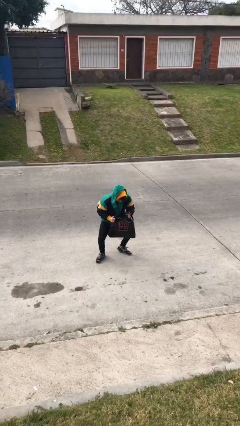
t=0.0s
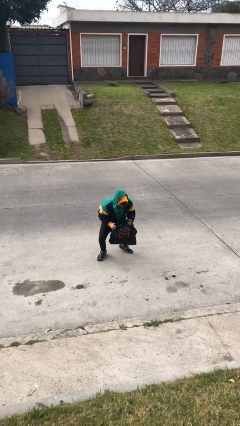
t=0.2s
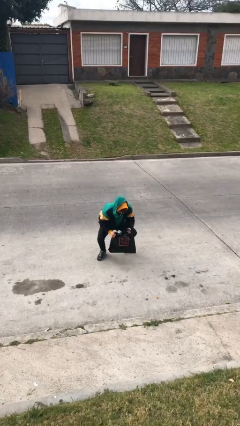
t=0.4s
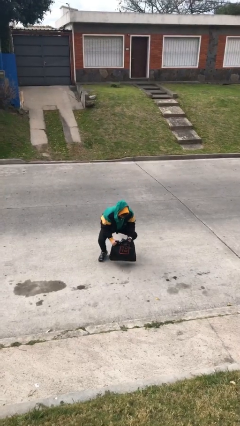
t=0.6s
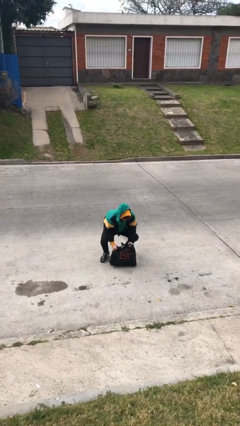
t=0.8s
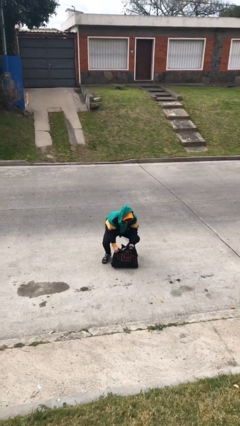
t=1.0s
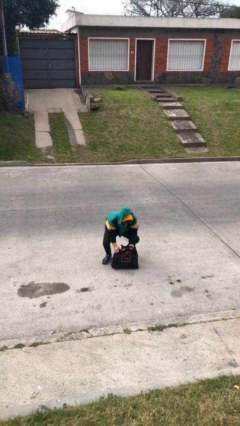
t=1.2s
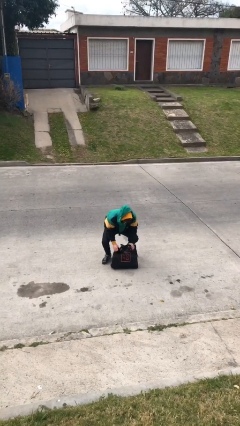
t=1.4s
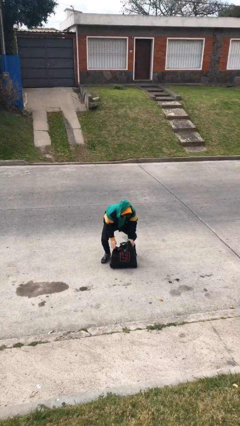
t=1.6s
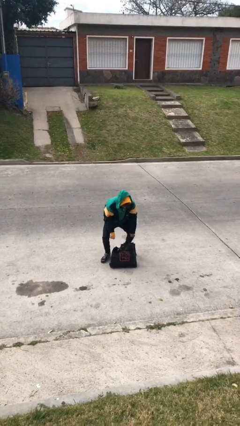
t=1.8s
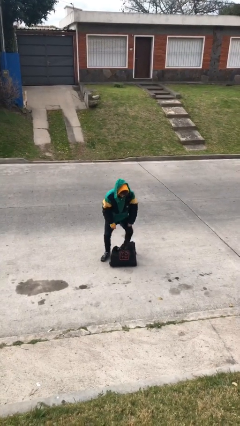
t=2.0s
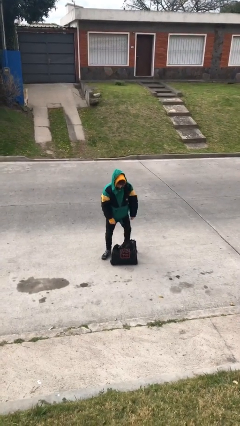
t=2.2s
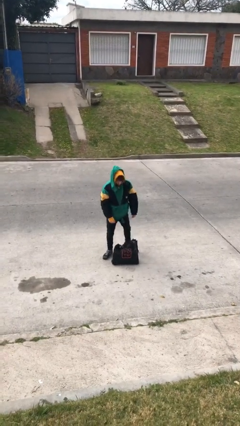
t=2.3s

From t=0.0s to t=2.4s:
person puts down object on floor

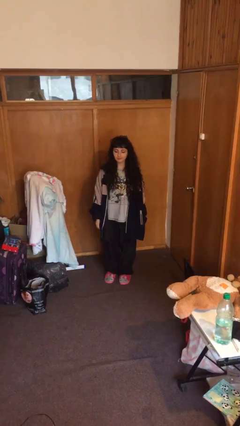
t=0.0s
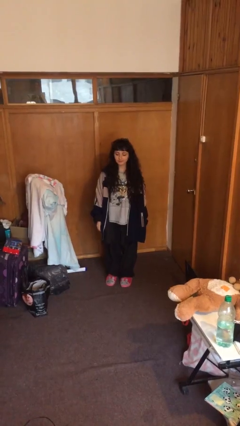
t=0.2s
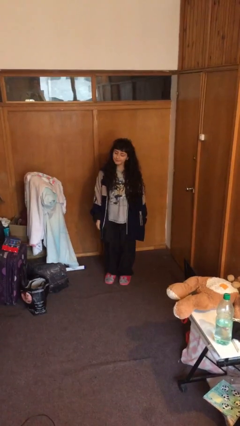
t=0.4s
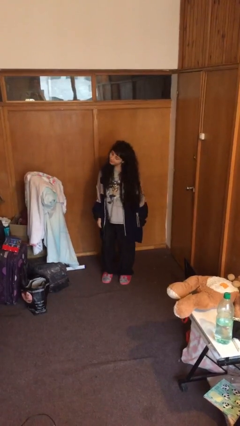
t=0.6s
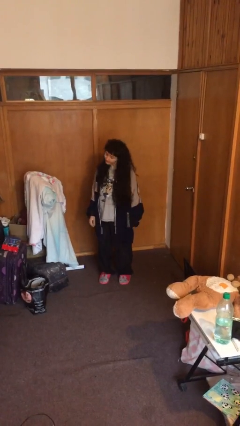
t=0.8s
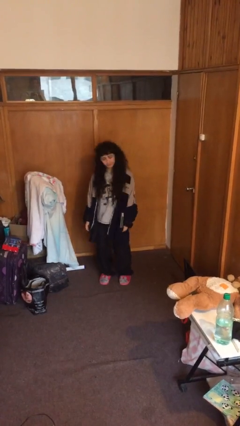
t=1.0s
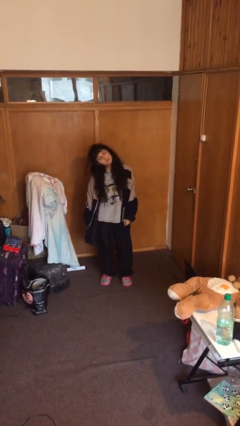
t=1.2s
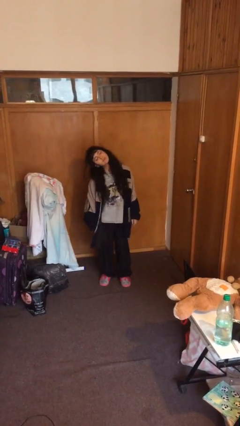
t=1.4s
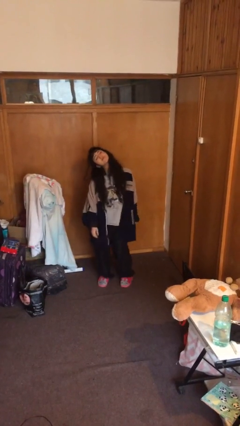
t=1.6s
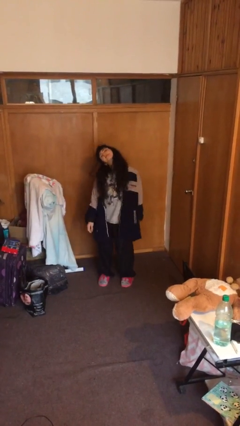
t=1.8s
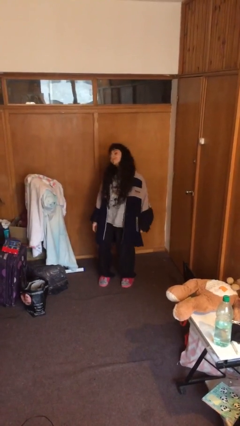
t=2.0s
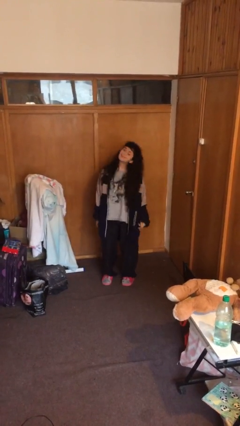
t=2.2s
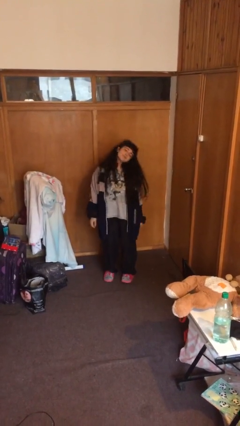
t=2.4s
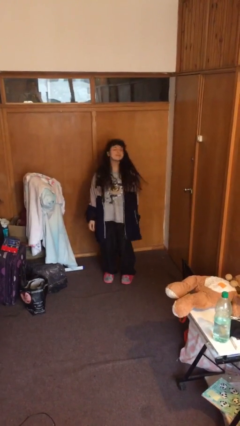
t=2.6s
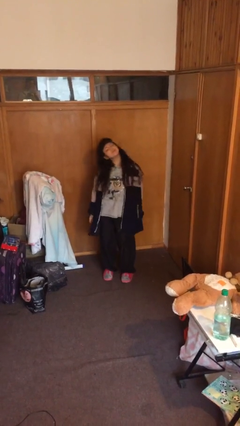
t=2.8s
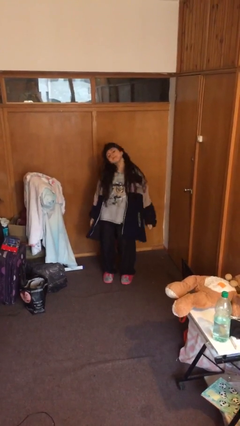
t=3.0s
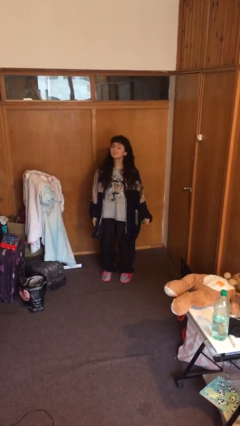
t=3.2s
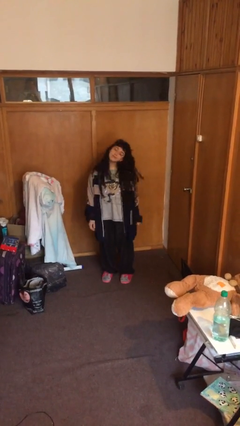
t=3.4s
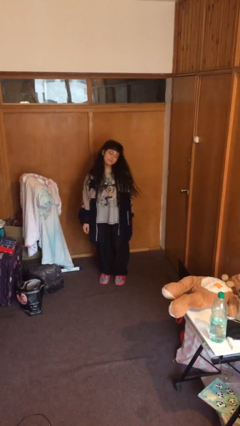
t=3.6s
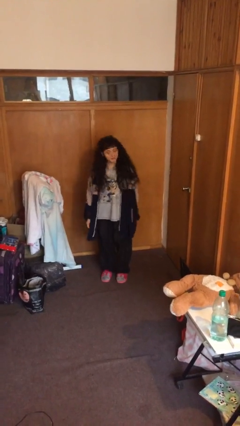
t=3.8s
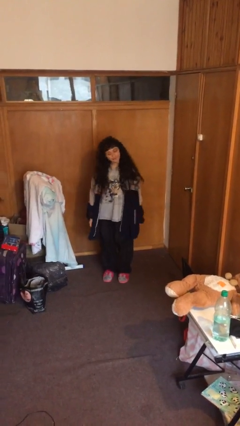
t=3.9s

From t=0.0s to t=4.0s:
person dances in place

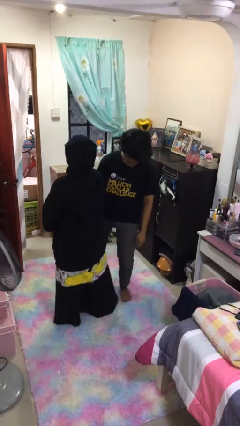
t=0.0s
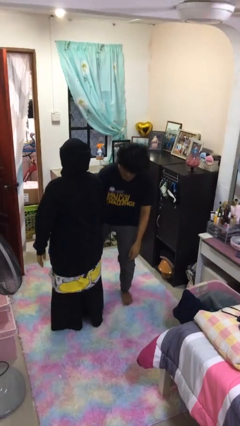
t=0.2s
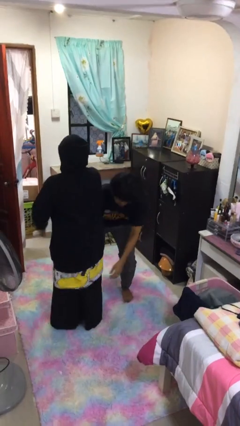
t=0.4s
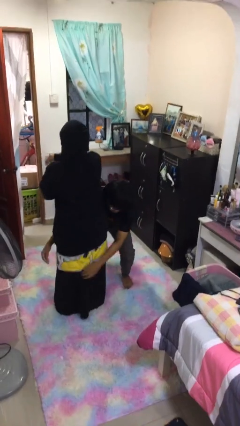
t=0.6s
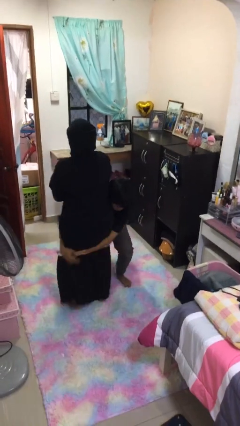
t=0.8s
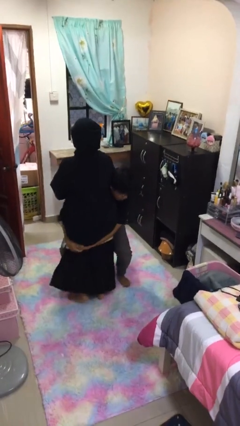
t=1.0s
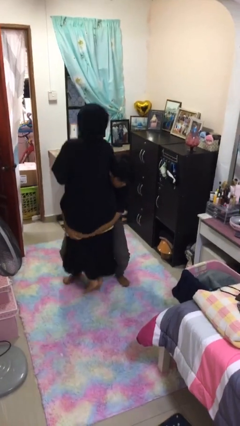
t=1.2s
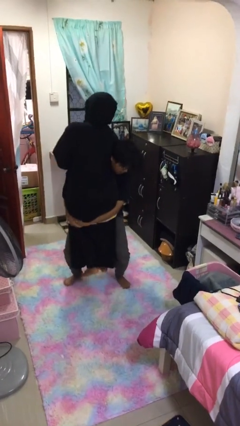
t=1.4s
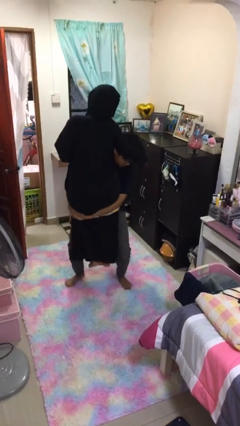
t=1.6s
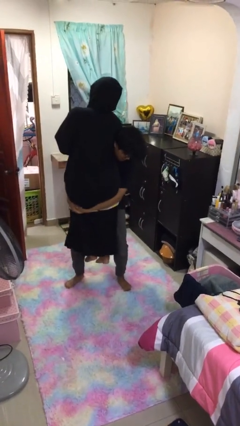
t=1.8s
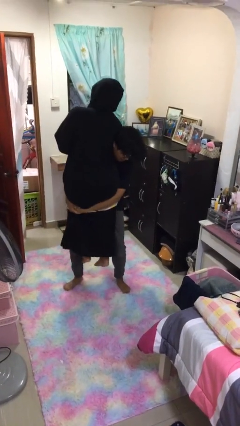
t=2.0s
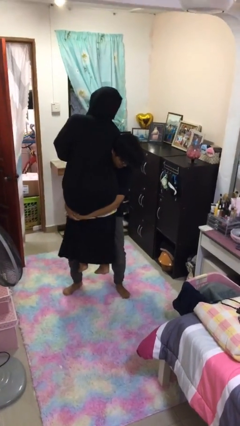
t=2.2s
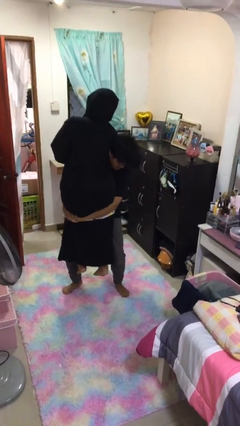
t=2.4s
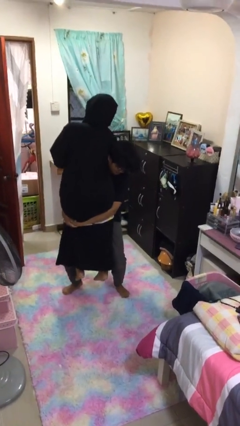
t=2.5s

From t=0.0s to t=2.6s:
person picks up person

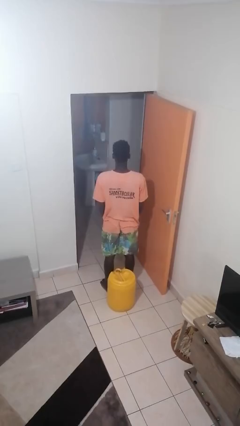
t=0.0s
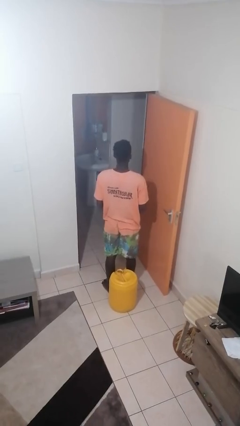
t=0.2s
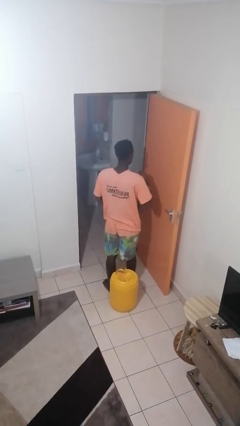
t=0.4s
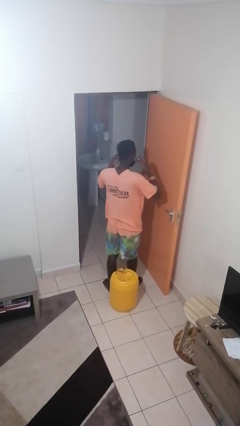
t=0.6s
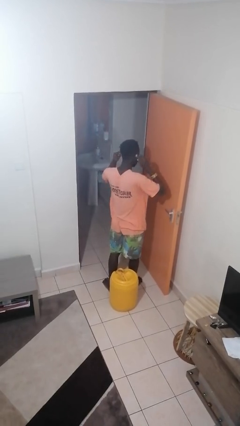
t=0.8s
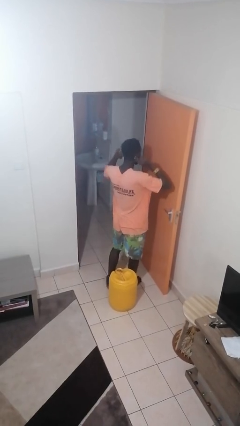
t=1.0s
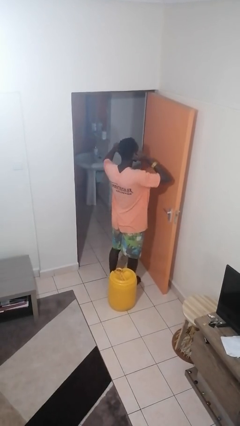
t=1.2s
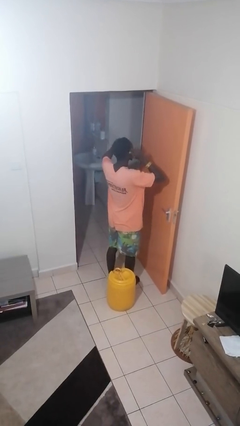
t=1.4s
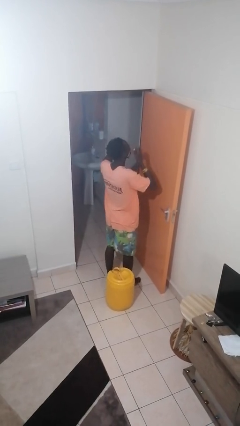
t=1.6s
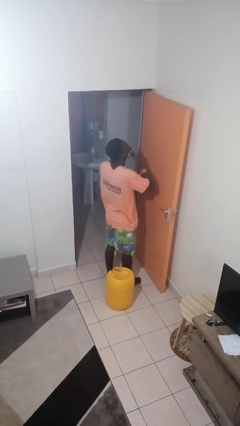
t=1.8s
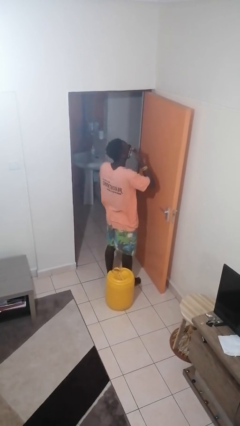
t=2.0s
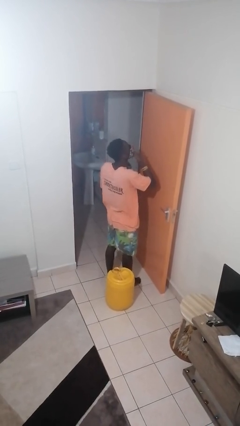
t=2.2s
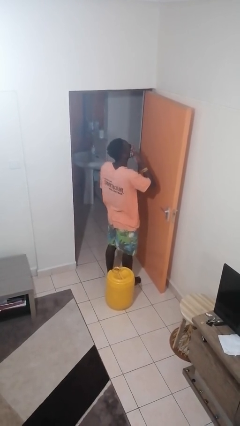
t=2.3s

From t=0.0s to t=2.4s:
person puts on facemask

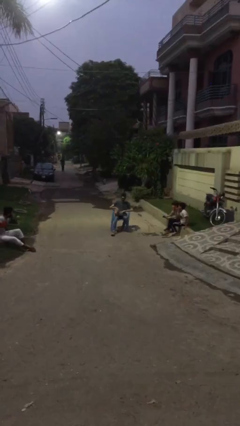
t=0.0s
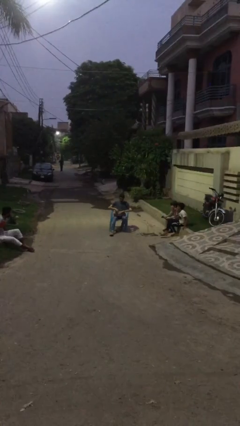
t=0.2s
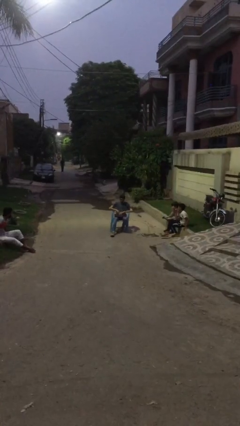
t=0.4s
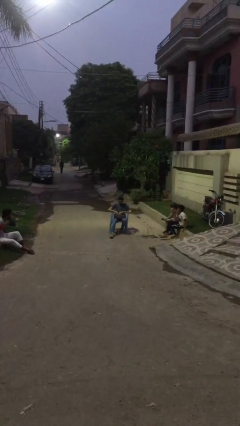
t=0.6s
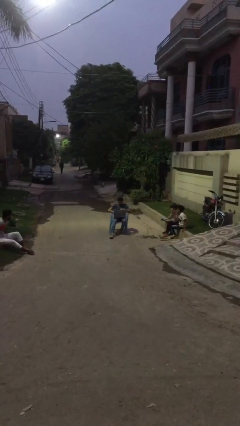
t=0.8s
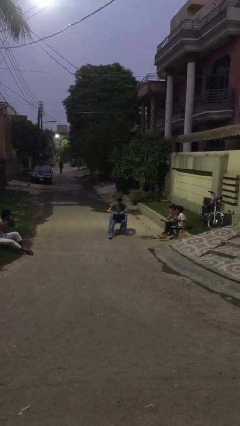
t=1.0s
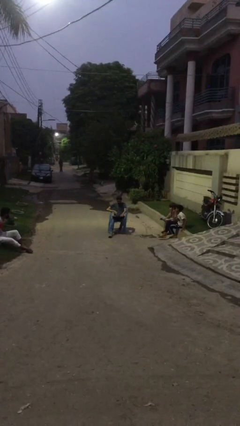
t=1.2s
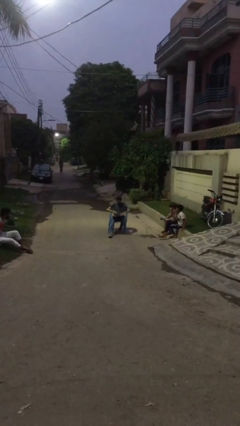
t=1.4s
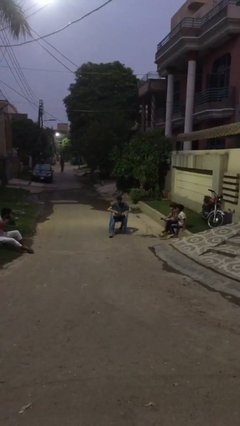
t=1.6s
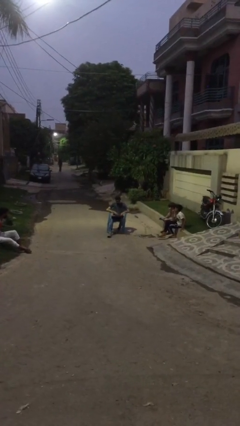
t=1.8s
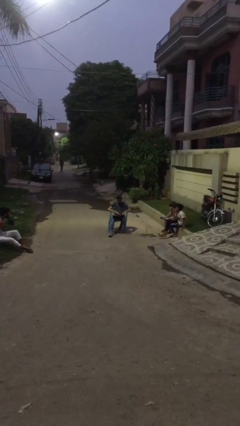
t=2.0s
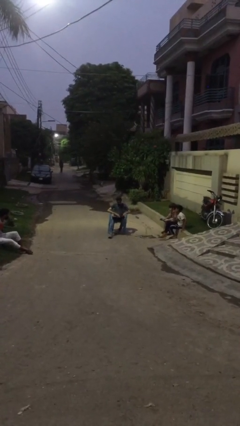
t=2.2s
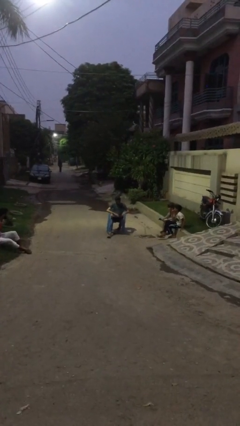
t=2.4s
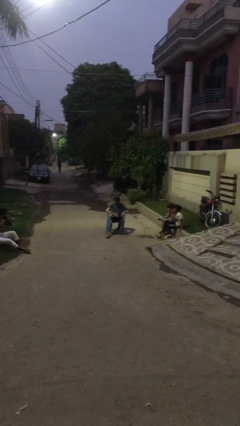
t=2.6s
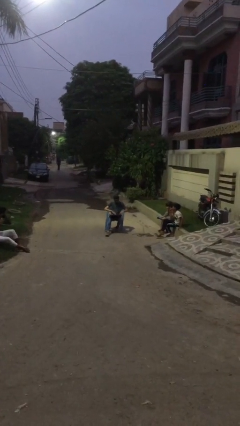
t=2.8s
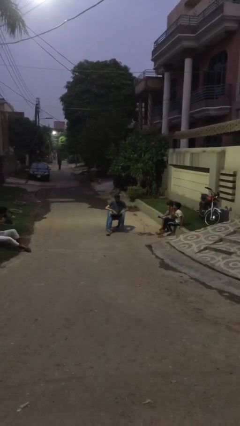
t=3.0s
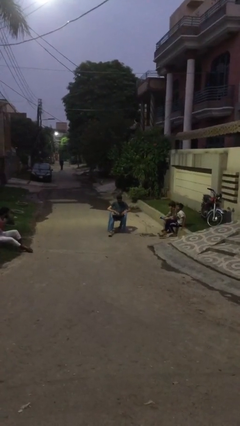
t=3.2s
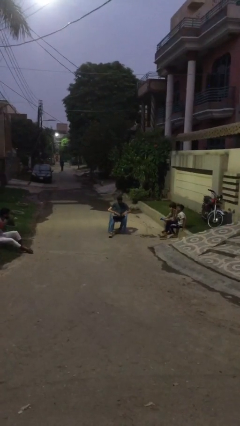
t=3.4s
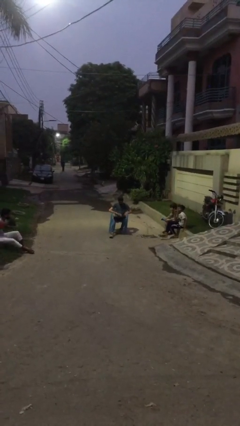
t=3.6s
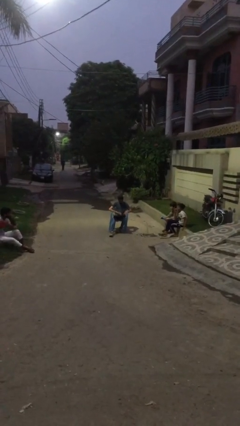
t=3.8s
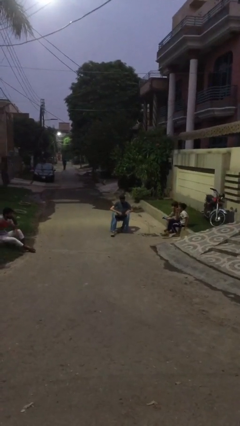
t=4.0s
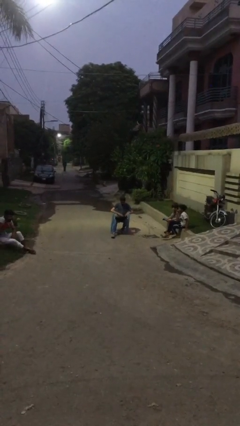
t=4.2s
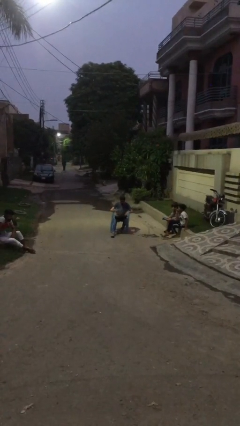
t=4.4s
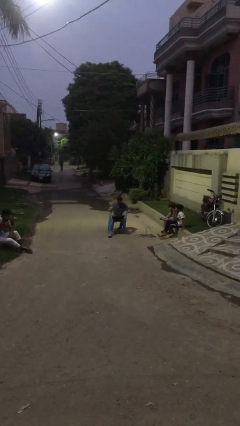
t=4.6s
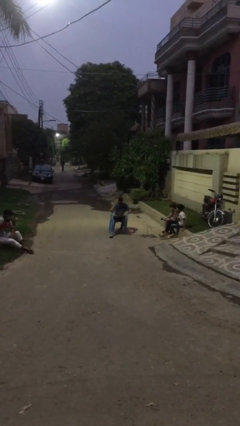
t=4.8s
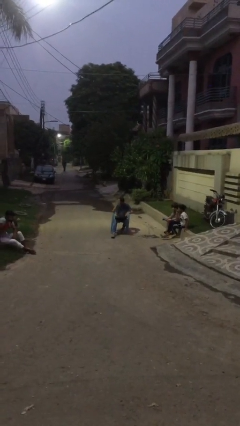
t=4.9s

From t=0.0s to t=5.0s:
person interacts with laptop

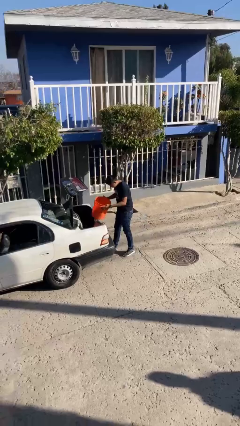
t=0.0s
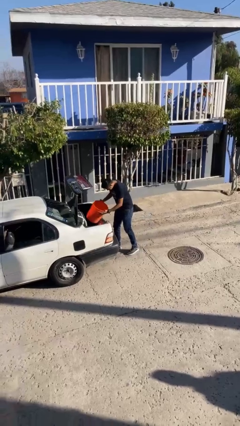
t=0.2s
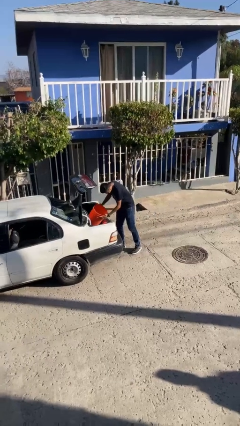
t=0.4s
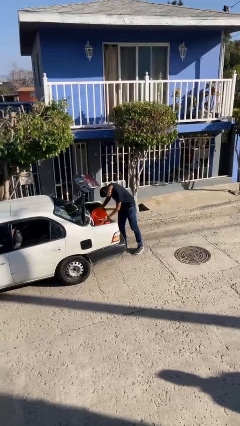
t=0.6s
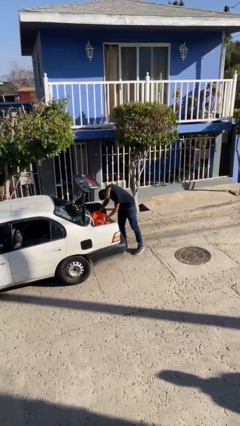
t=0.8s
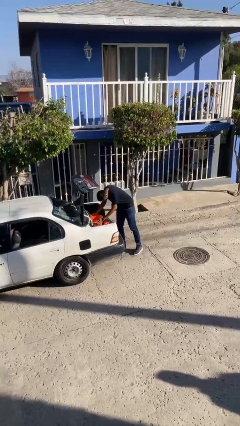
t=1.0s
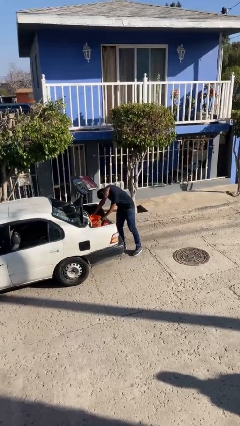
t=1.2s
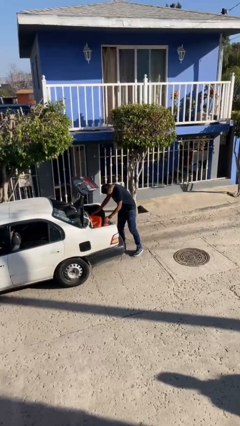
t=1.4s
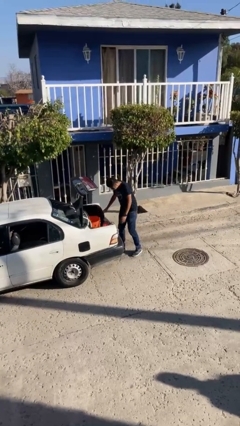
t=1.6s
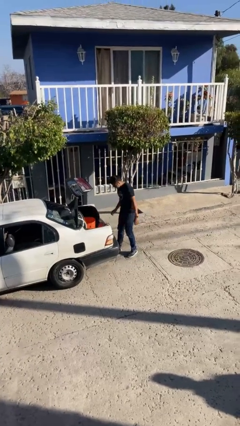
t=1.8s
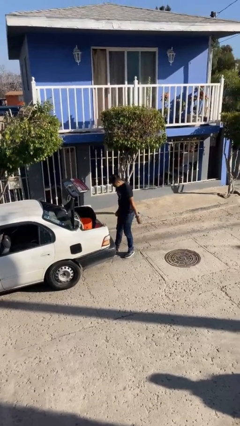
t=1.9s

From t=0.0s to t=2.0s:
person loads car
